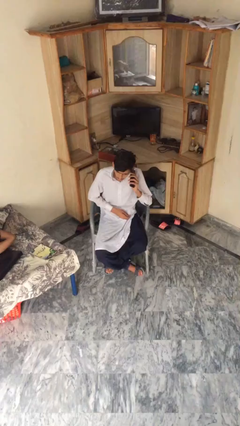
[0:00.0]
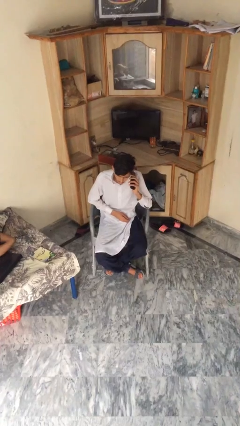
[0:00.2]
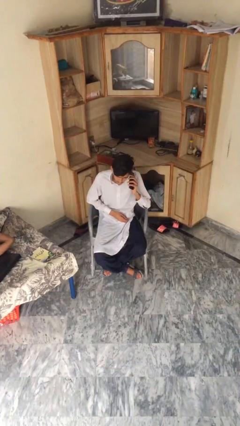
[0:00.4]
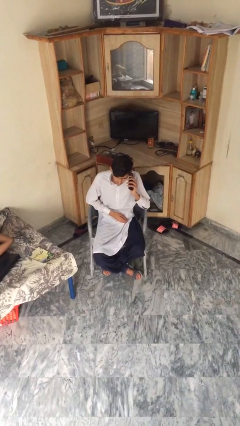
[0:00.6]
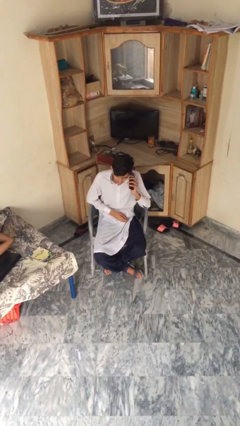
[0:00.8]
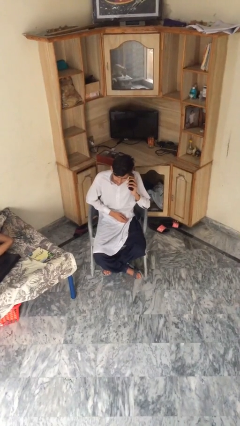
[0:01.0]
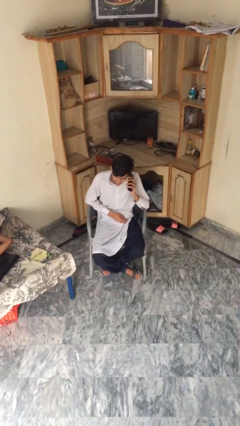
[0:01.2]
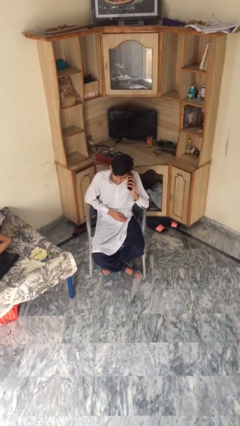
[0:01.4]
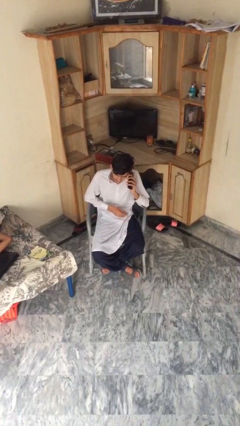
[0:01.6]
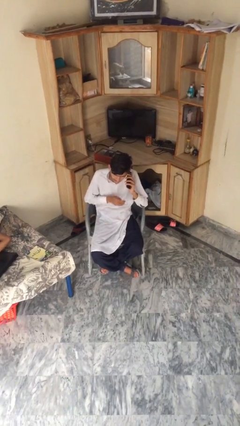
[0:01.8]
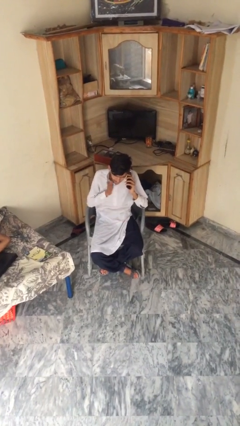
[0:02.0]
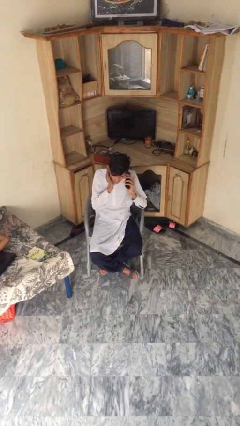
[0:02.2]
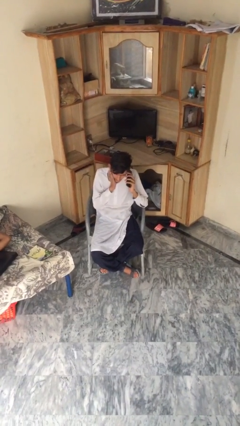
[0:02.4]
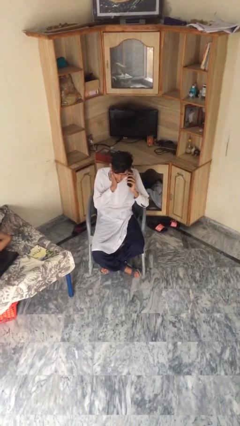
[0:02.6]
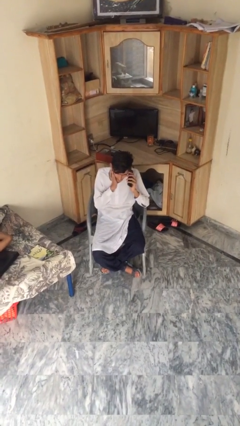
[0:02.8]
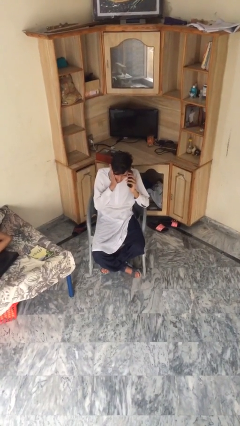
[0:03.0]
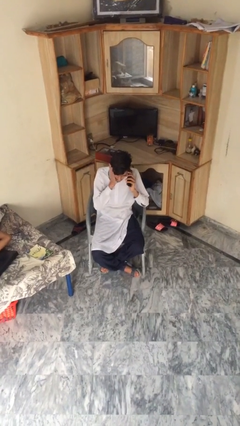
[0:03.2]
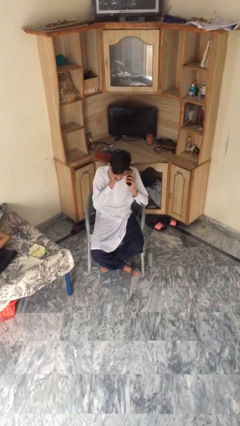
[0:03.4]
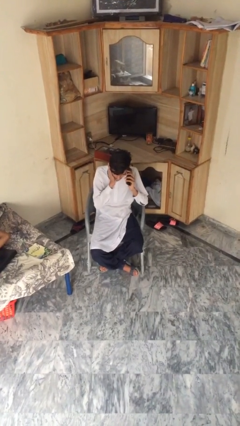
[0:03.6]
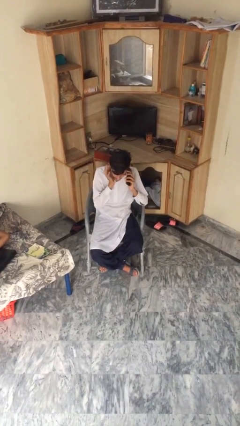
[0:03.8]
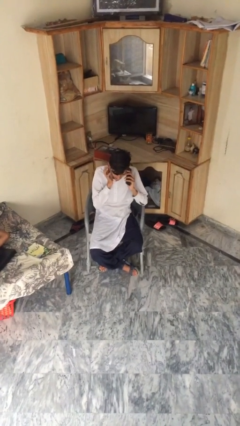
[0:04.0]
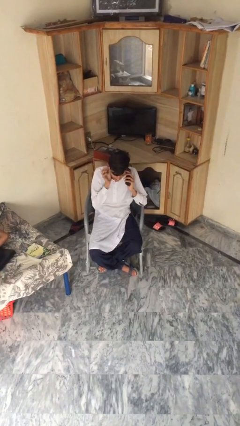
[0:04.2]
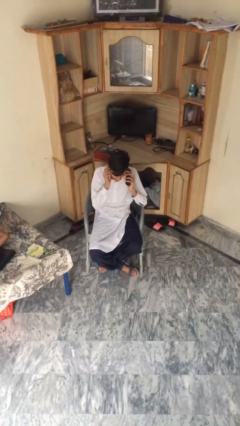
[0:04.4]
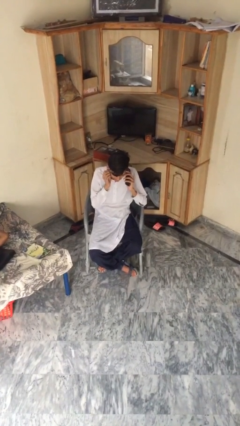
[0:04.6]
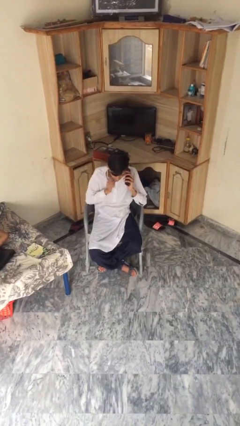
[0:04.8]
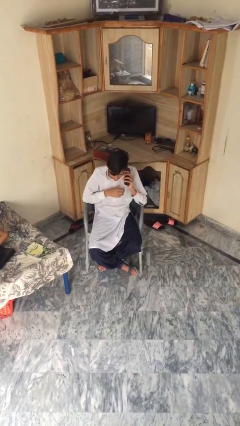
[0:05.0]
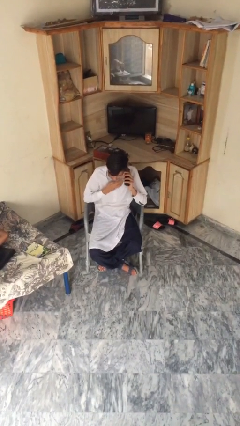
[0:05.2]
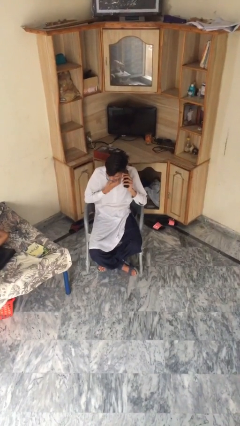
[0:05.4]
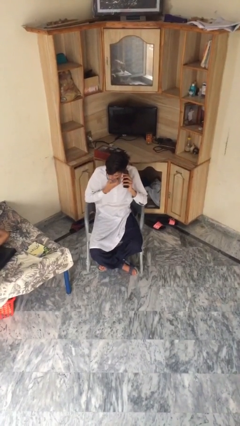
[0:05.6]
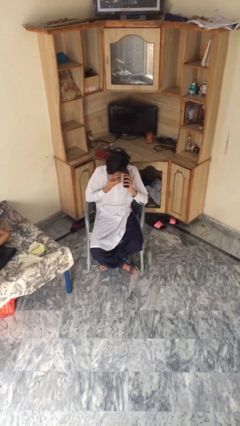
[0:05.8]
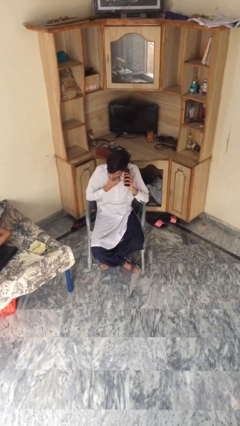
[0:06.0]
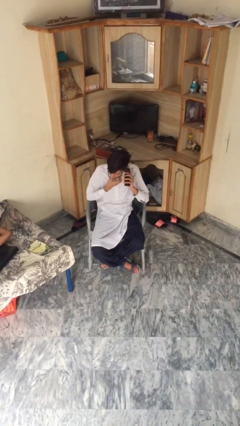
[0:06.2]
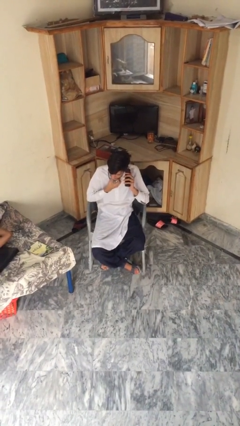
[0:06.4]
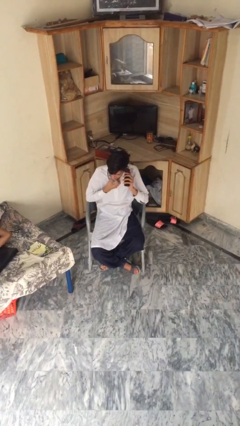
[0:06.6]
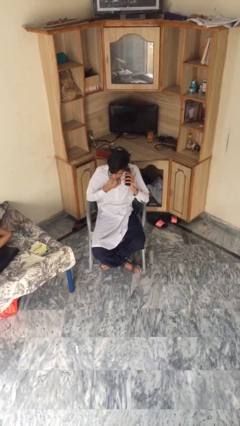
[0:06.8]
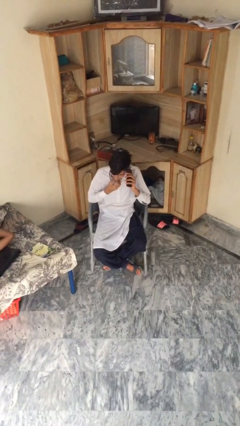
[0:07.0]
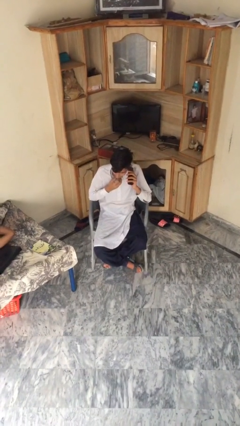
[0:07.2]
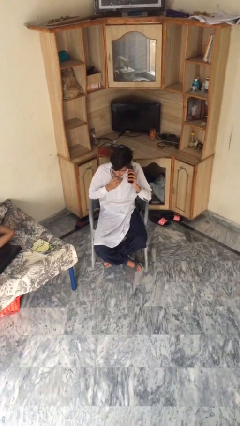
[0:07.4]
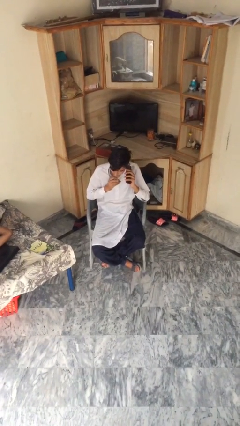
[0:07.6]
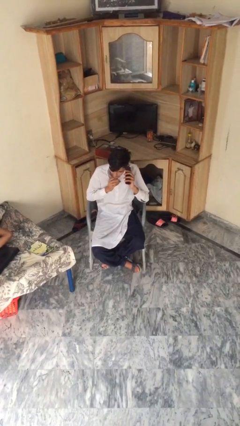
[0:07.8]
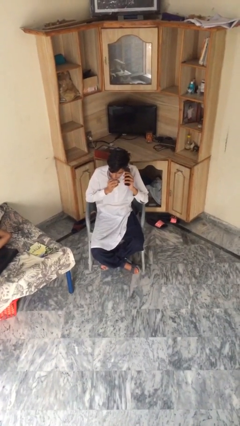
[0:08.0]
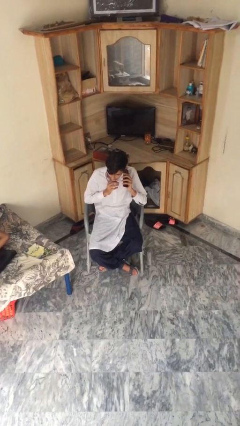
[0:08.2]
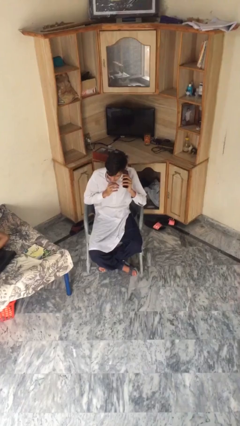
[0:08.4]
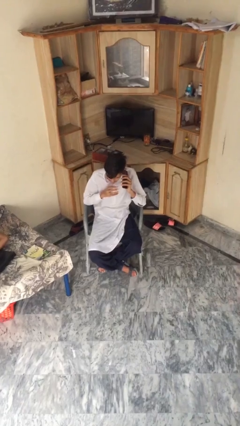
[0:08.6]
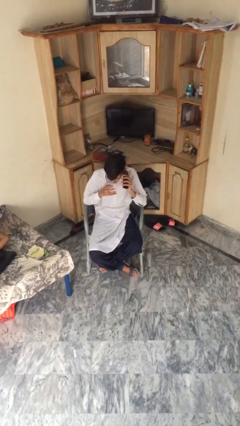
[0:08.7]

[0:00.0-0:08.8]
person talks on phone

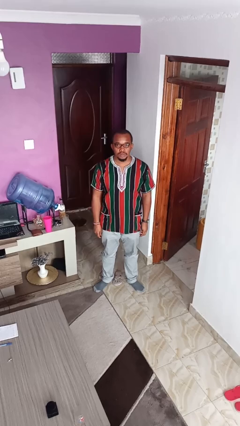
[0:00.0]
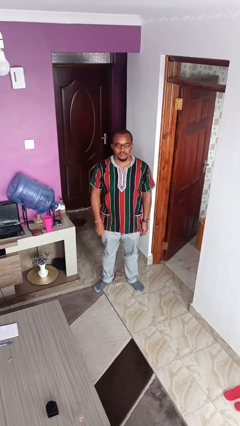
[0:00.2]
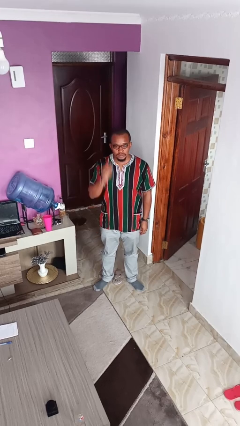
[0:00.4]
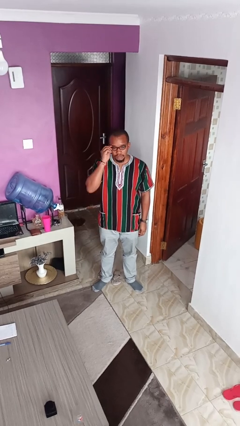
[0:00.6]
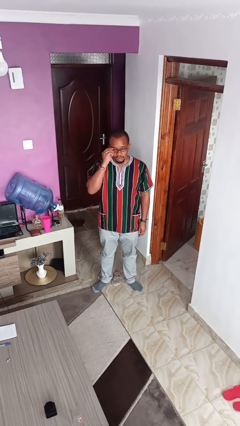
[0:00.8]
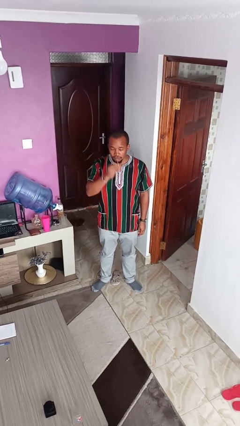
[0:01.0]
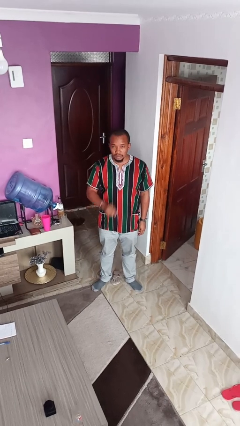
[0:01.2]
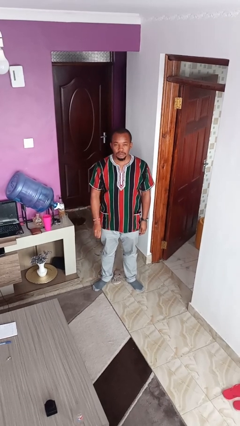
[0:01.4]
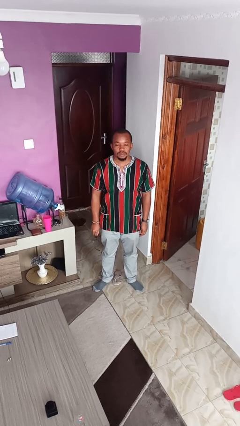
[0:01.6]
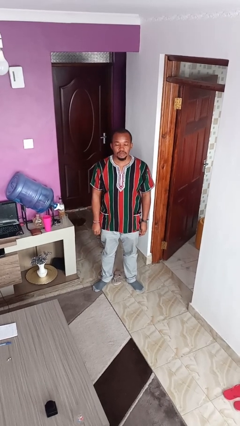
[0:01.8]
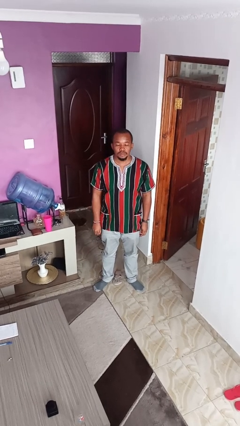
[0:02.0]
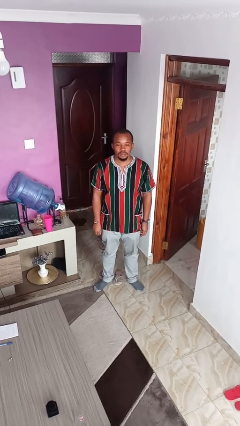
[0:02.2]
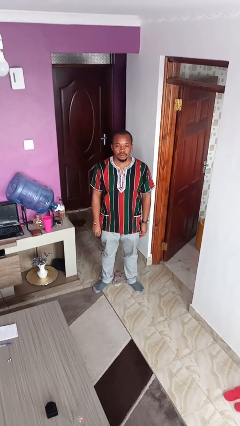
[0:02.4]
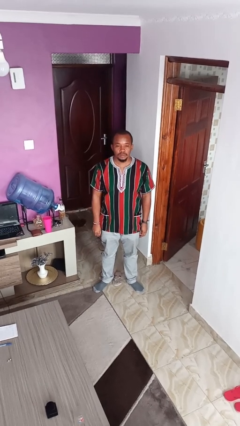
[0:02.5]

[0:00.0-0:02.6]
person takes off glasses

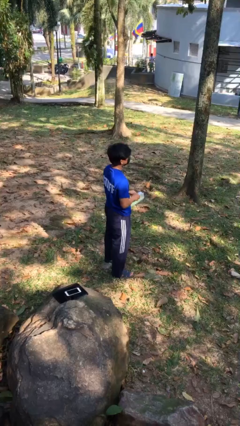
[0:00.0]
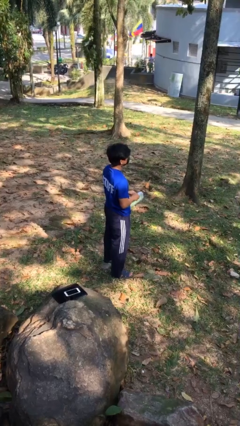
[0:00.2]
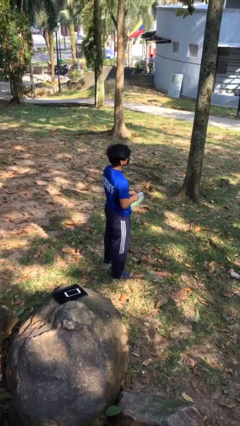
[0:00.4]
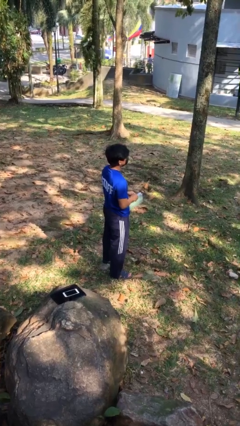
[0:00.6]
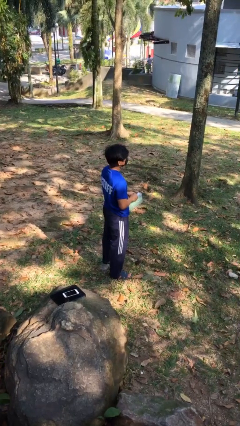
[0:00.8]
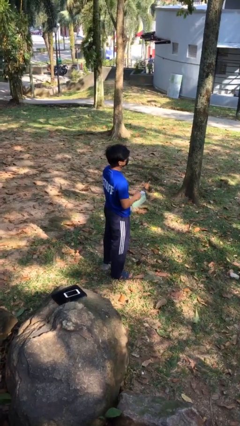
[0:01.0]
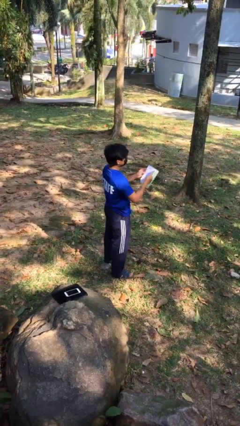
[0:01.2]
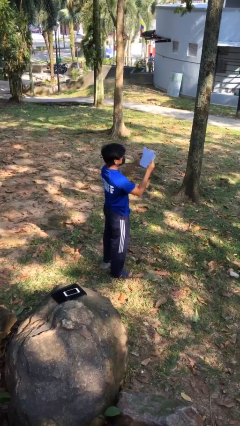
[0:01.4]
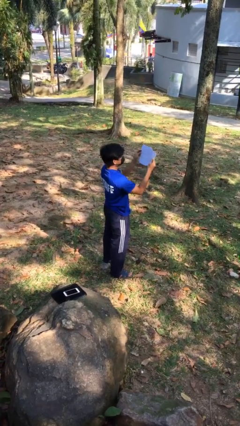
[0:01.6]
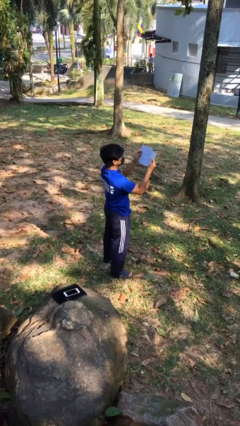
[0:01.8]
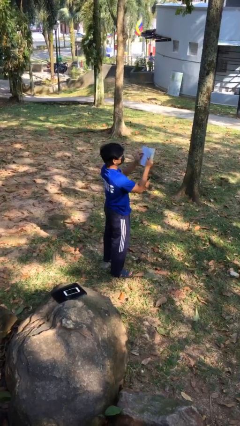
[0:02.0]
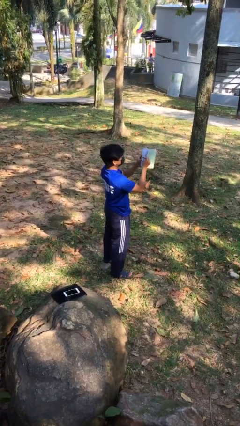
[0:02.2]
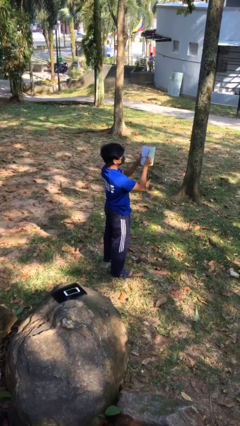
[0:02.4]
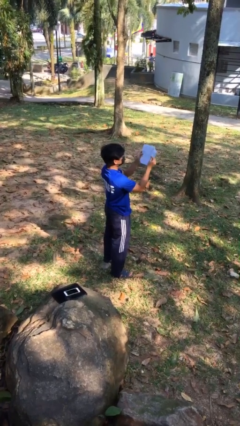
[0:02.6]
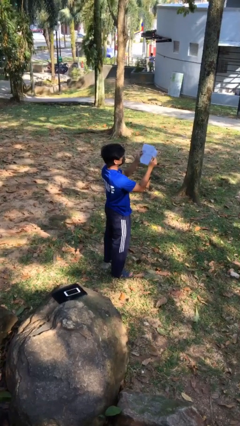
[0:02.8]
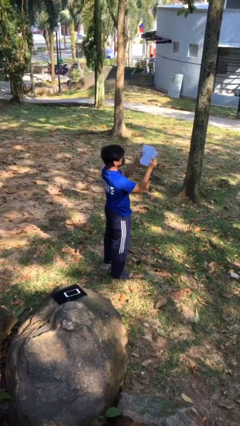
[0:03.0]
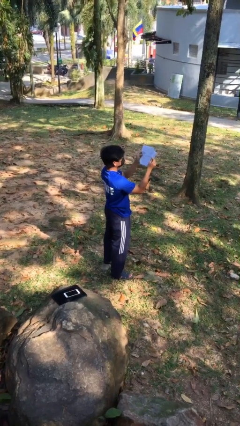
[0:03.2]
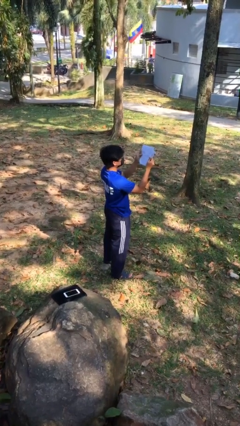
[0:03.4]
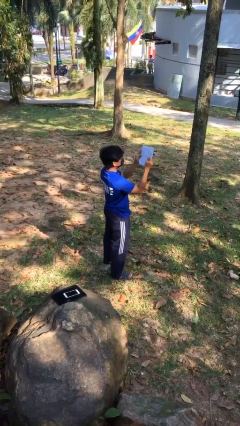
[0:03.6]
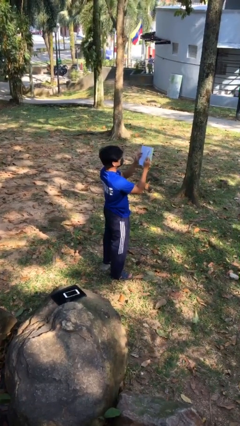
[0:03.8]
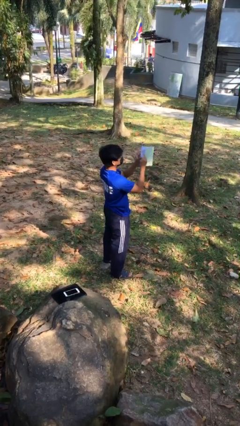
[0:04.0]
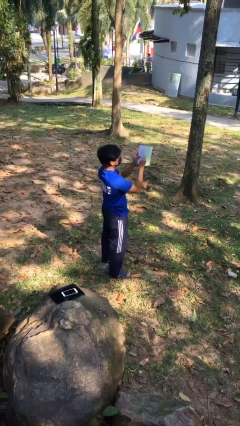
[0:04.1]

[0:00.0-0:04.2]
person reads document

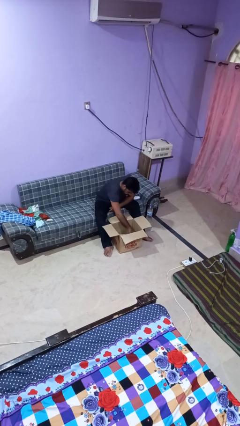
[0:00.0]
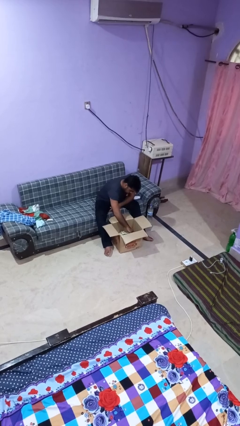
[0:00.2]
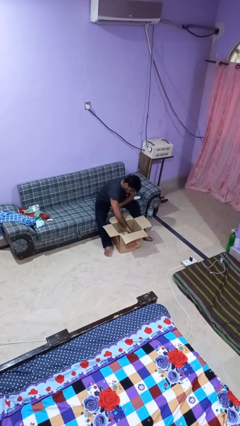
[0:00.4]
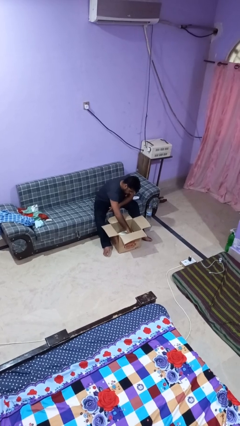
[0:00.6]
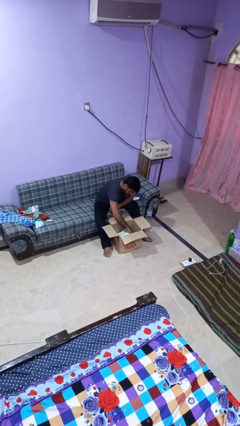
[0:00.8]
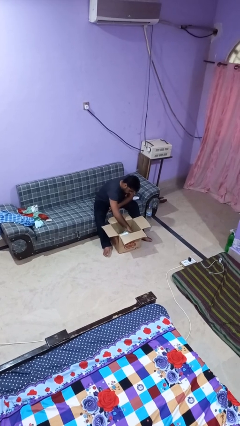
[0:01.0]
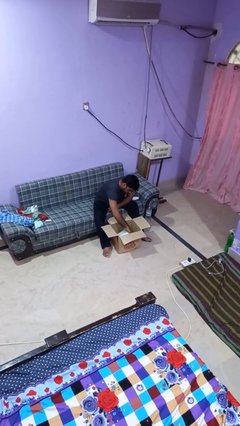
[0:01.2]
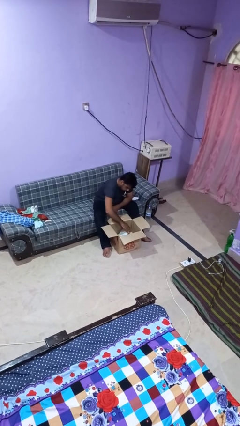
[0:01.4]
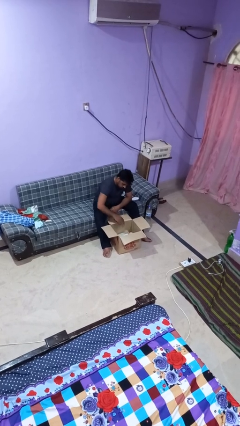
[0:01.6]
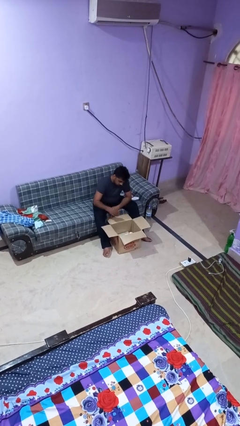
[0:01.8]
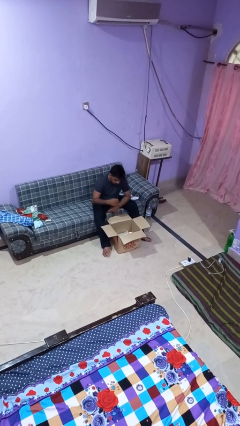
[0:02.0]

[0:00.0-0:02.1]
person searches in box
